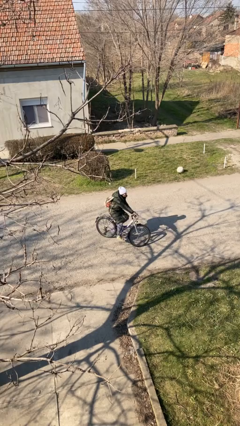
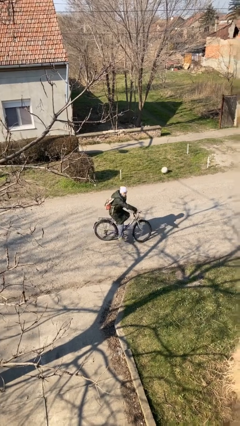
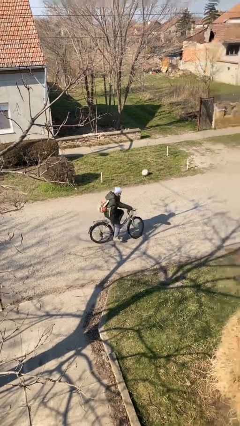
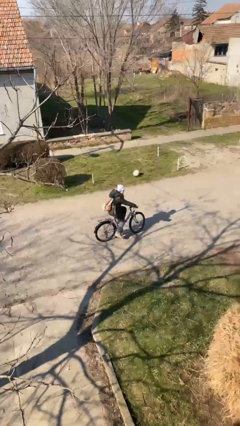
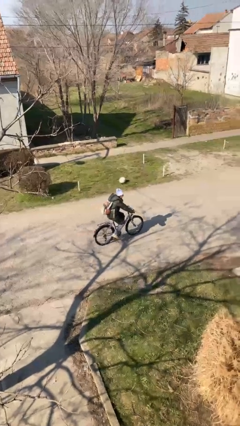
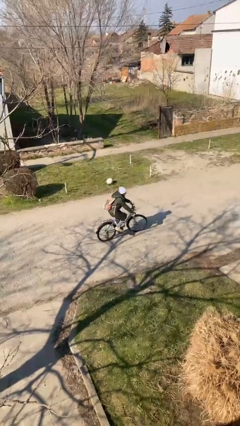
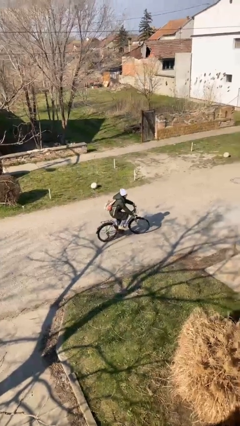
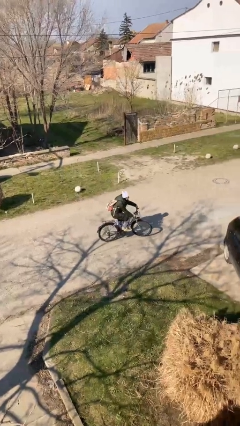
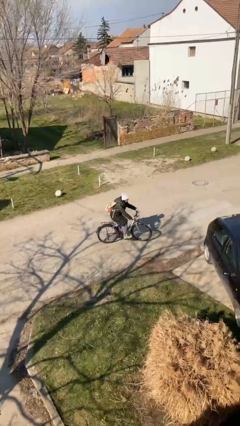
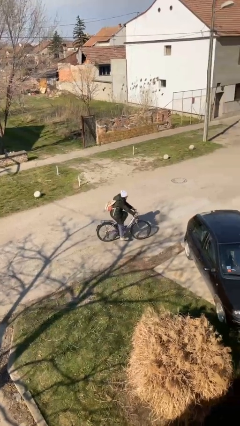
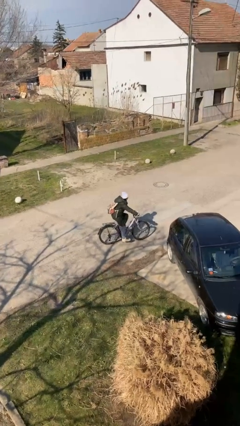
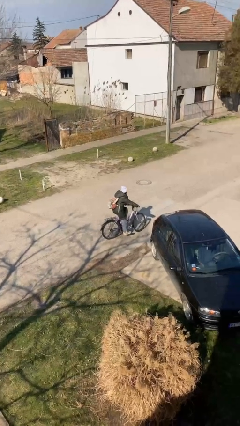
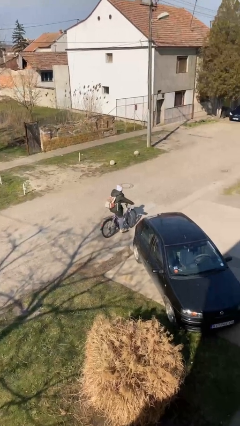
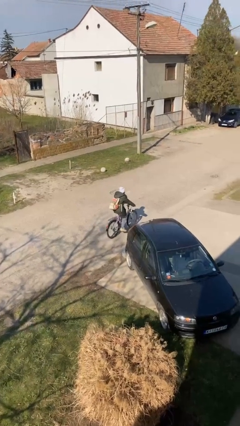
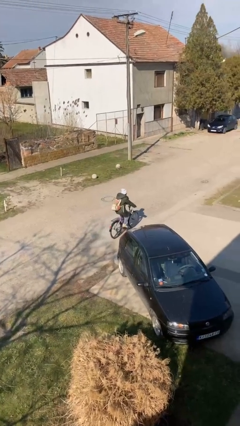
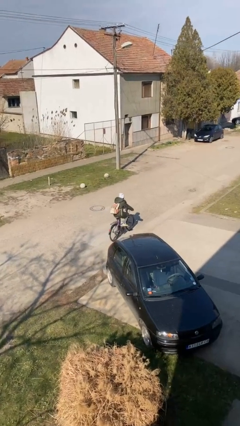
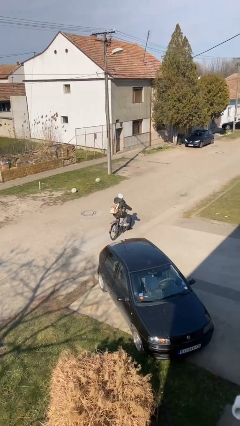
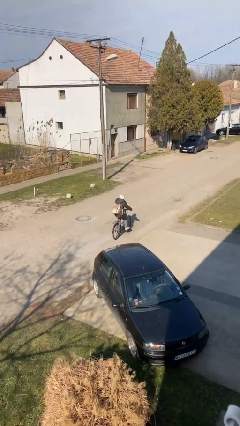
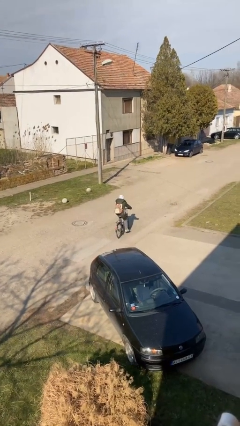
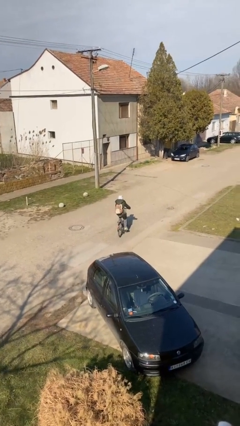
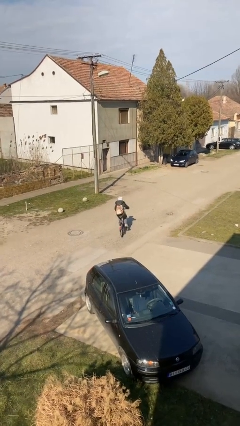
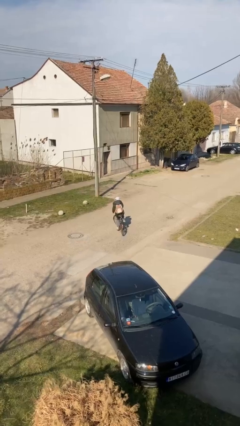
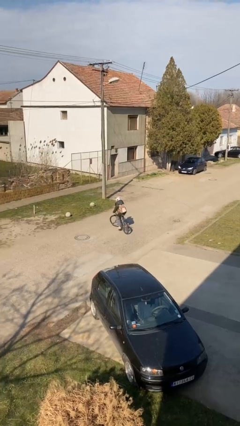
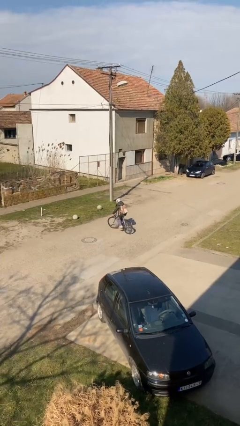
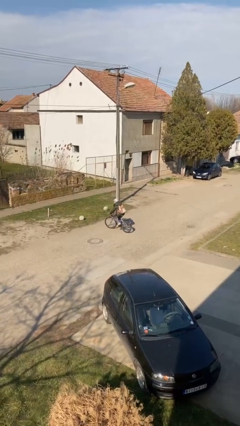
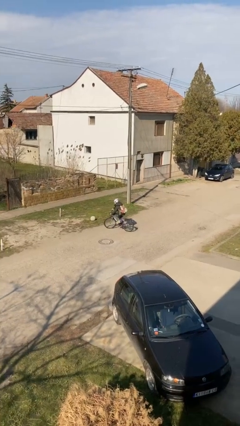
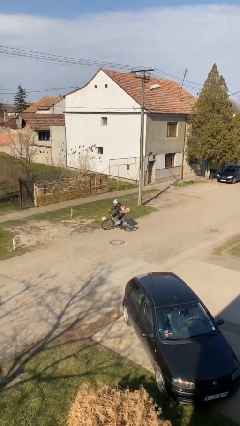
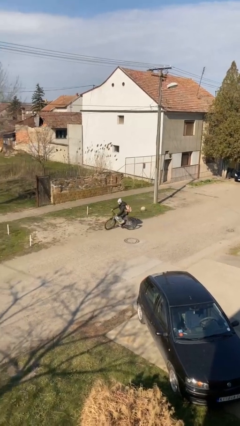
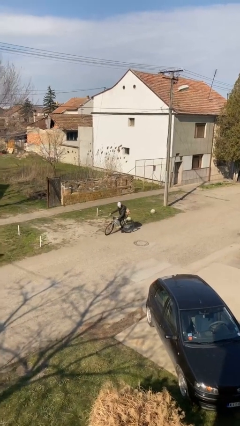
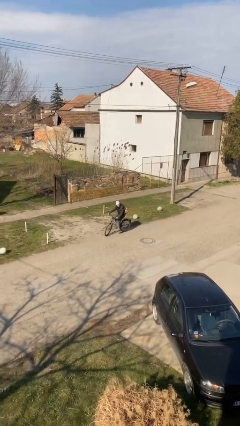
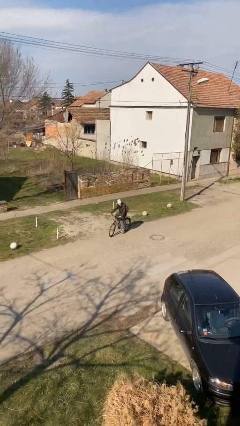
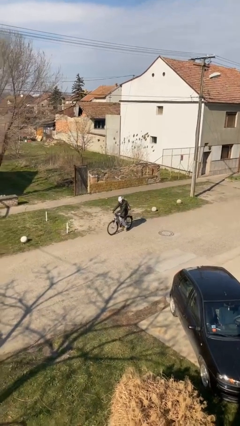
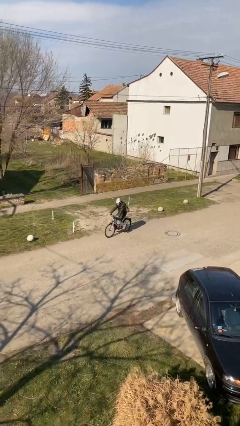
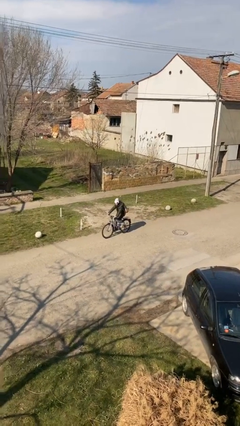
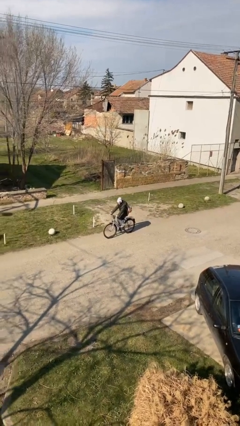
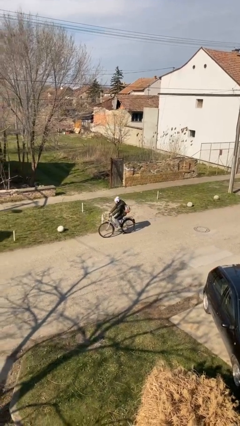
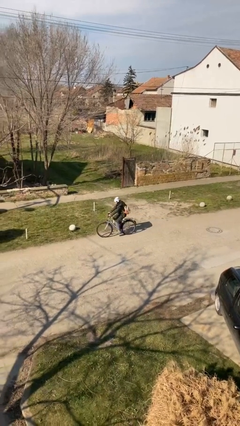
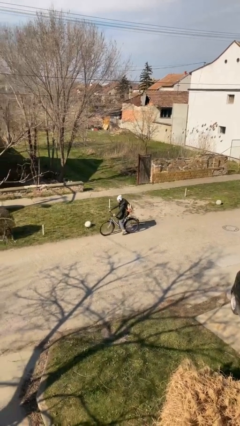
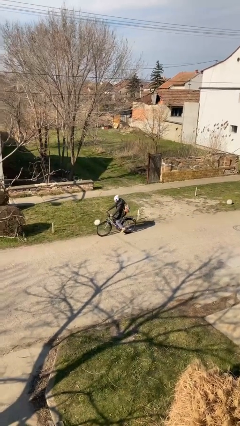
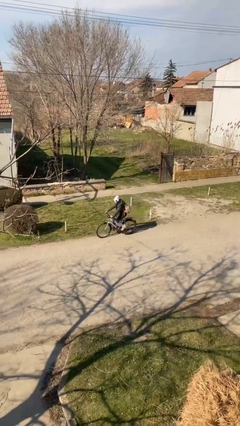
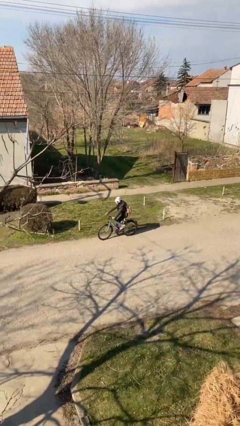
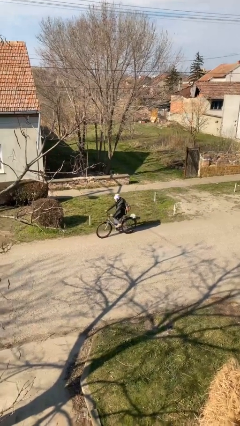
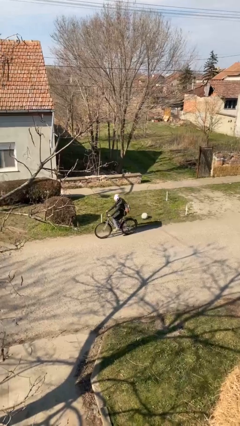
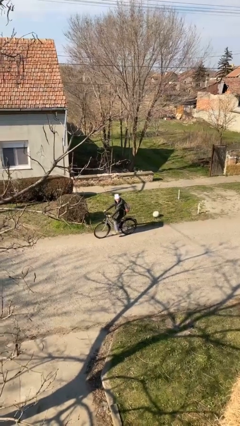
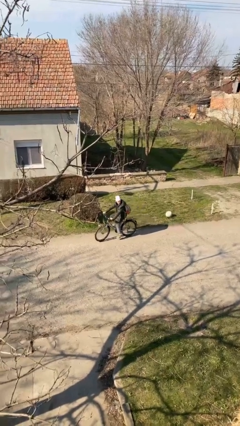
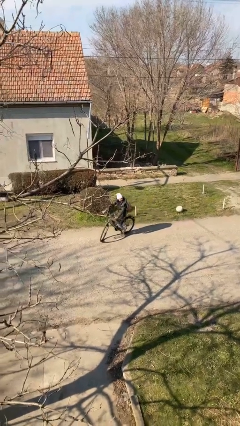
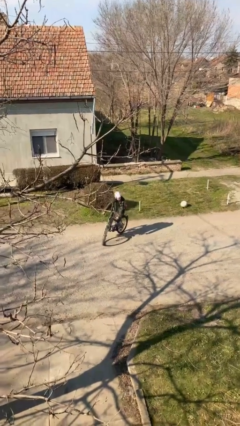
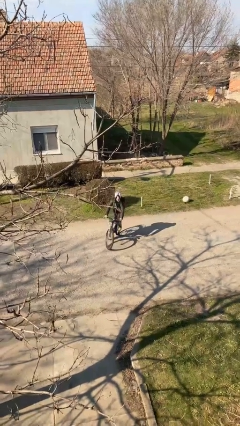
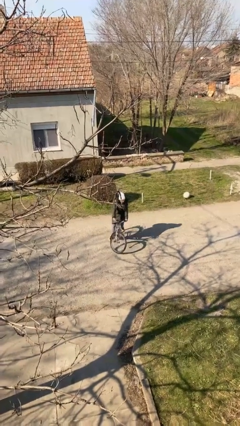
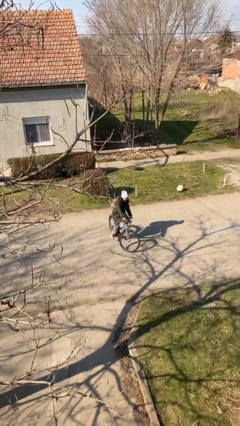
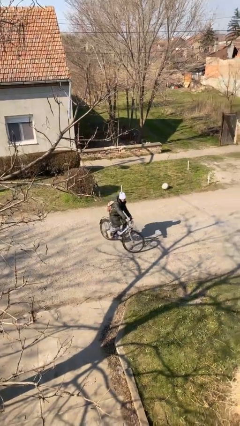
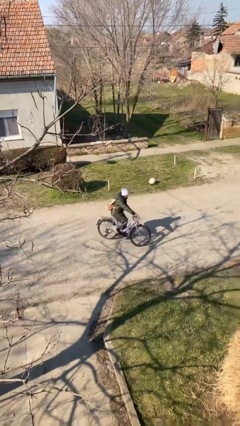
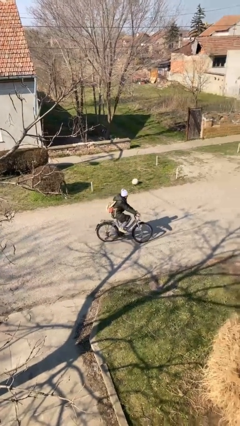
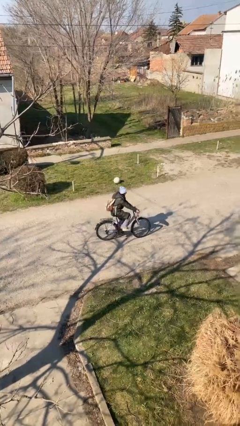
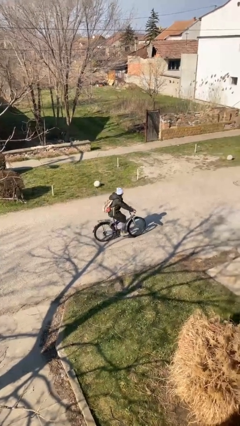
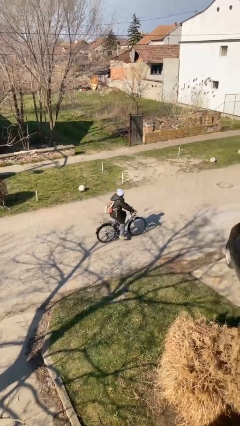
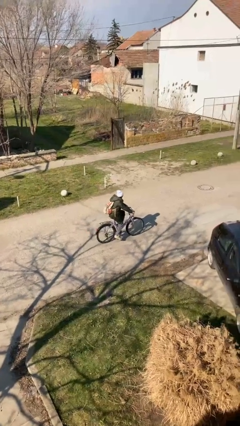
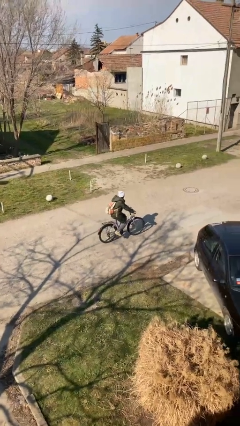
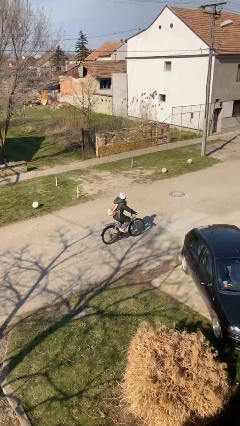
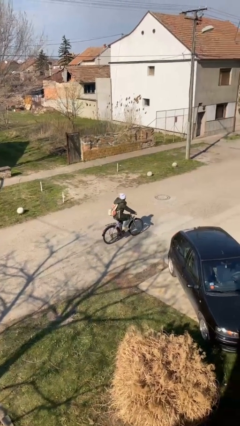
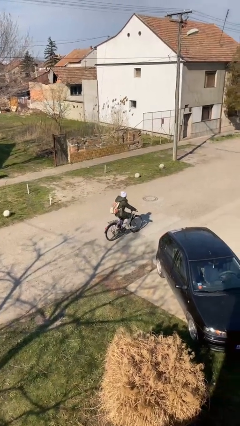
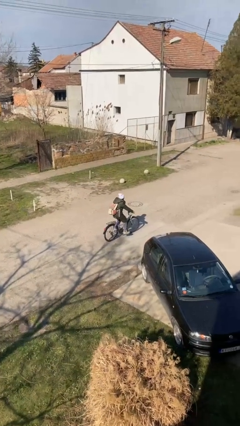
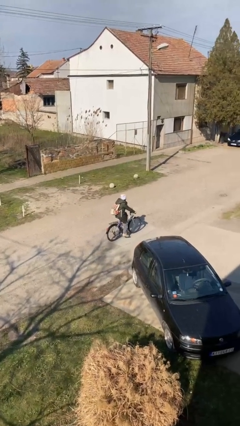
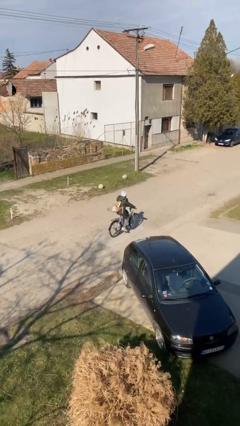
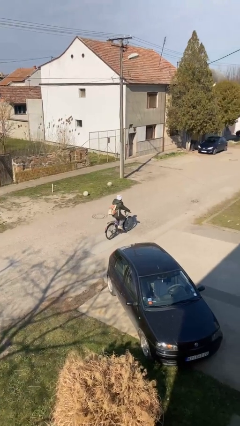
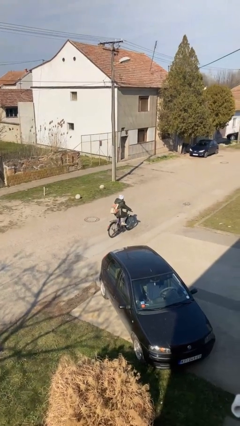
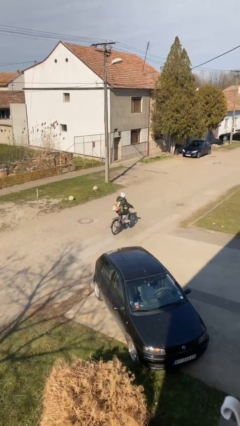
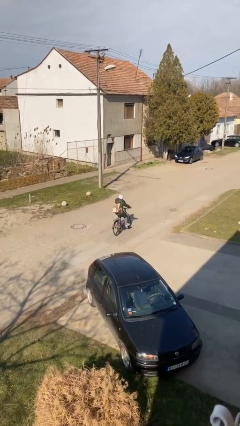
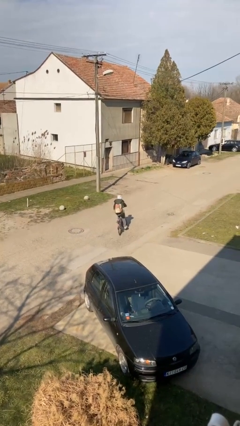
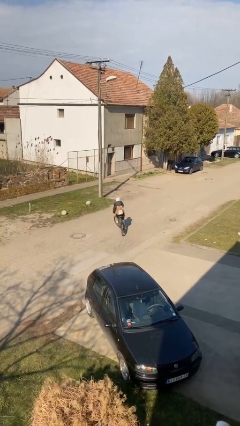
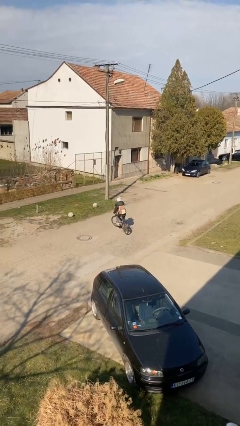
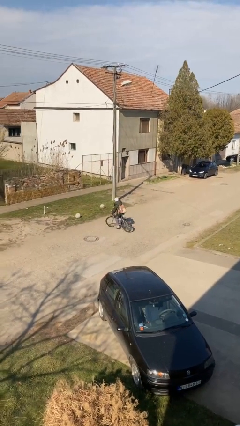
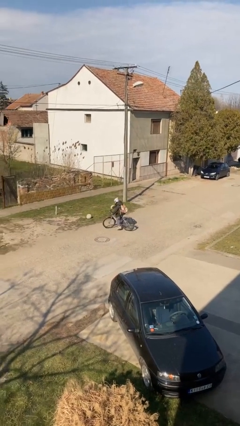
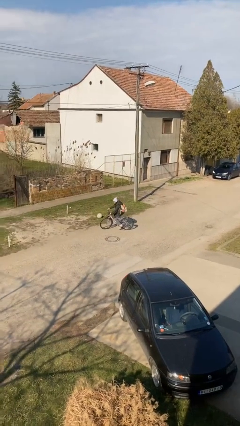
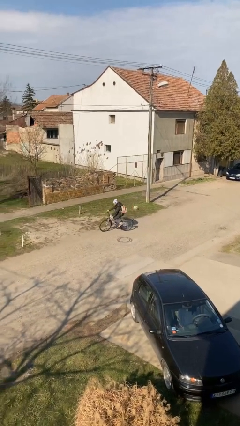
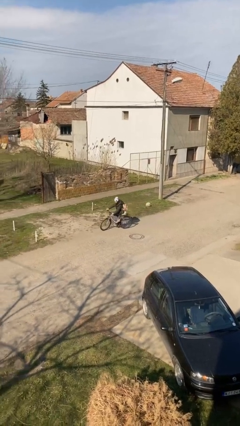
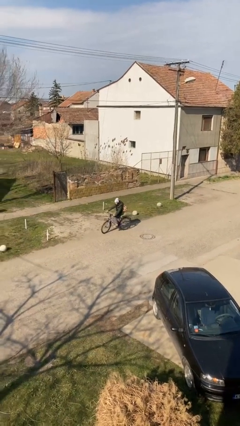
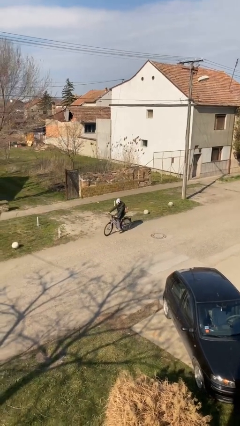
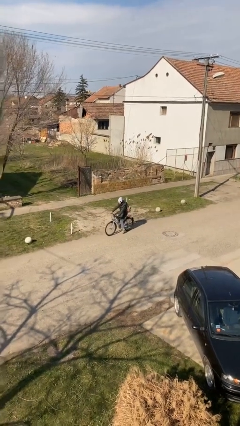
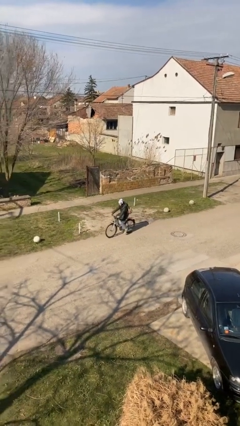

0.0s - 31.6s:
person rides bicycle

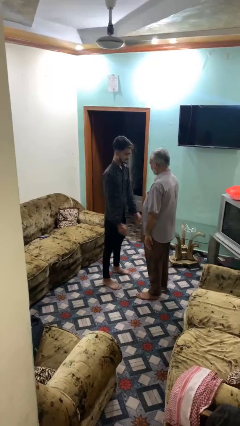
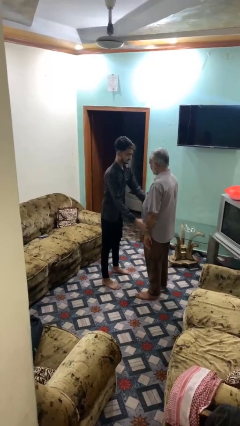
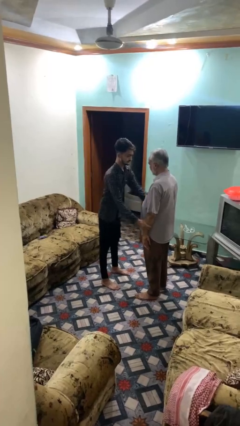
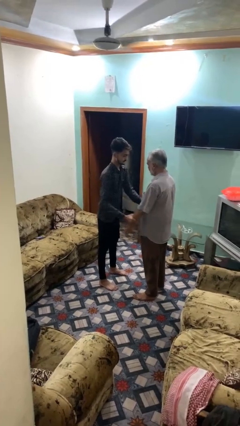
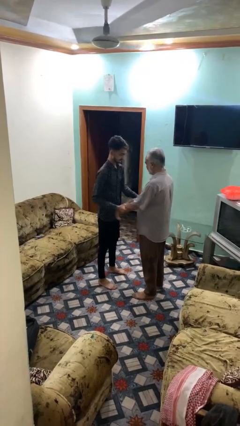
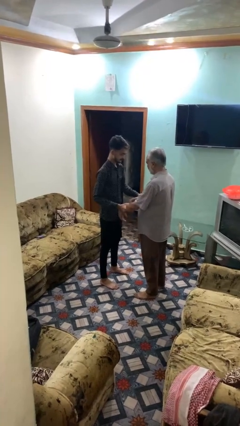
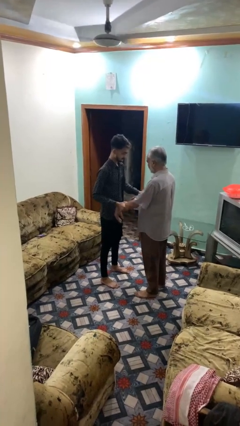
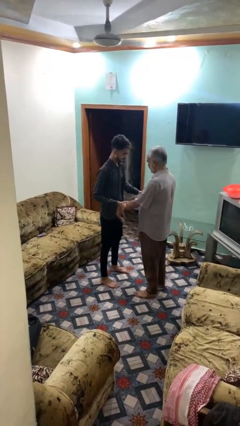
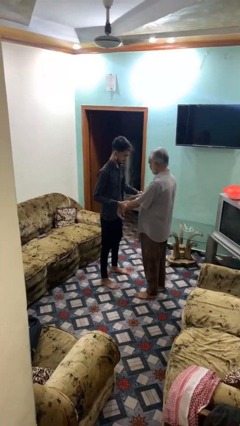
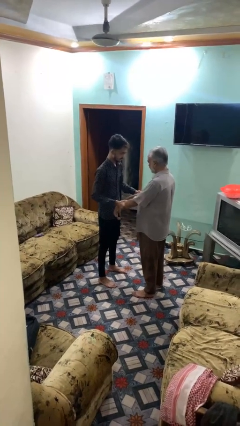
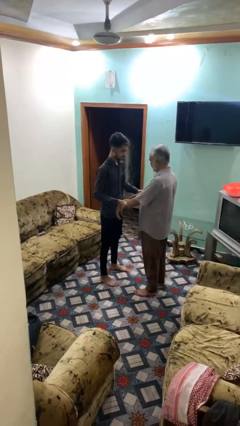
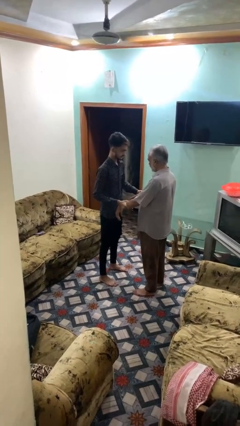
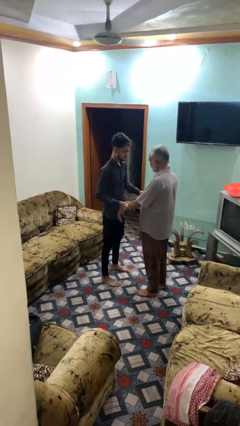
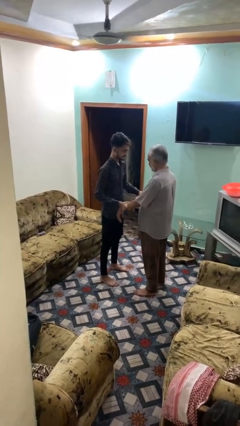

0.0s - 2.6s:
person grabs person by forearm
